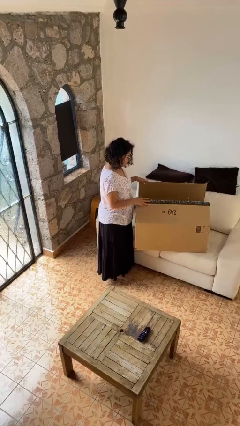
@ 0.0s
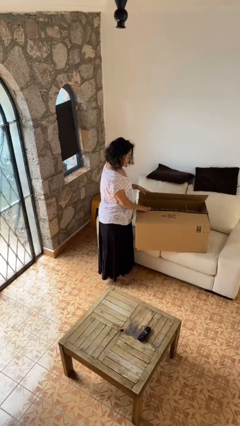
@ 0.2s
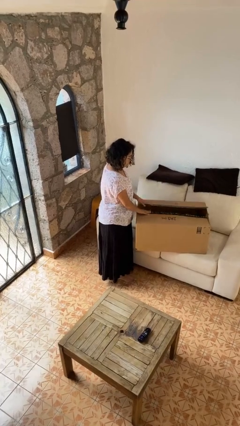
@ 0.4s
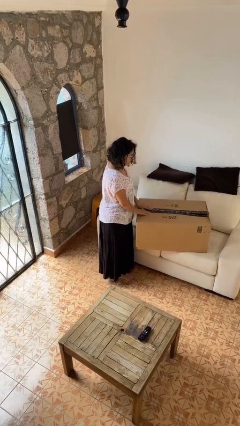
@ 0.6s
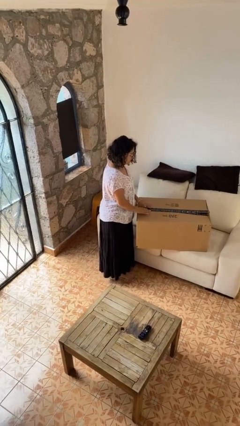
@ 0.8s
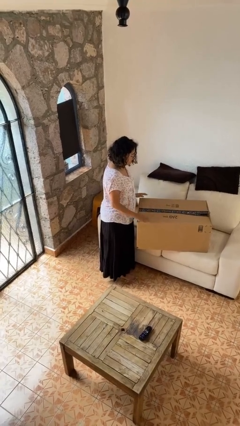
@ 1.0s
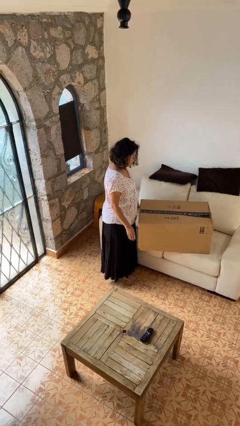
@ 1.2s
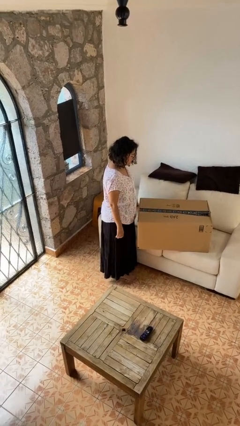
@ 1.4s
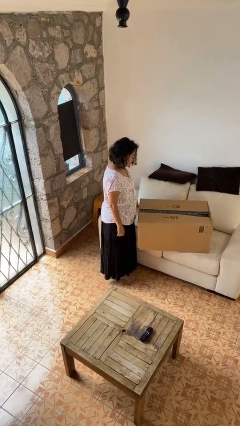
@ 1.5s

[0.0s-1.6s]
person closes box

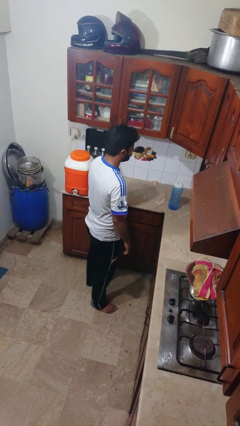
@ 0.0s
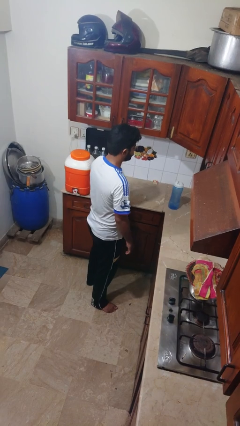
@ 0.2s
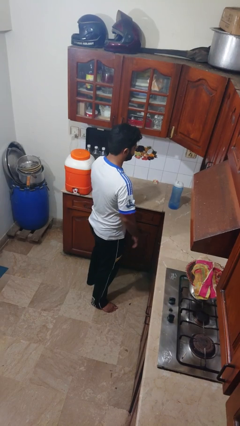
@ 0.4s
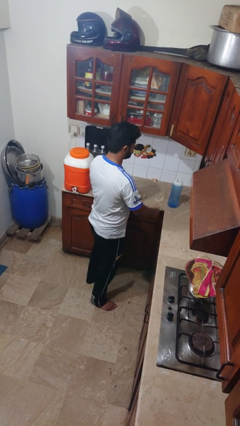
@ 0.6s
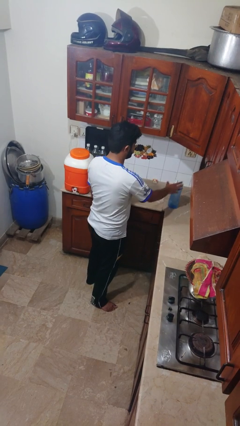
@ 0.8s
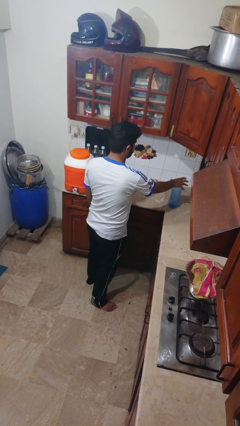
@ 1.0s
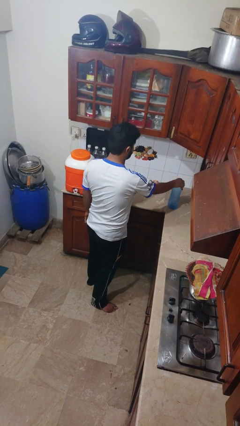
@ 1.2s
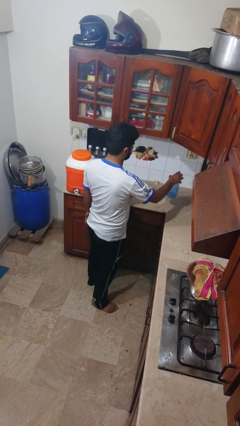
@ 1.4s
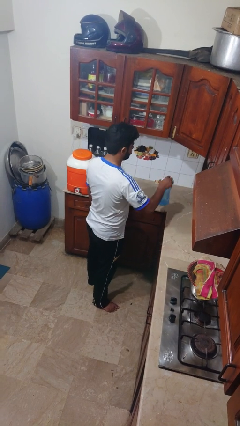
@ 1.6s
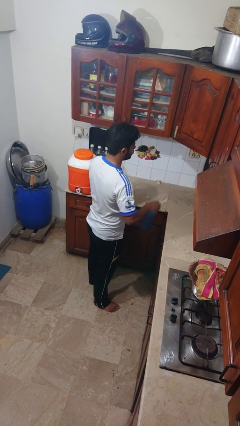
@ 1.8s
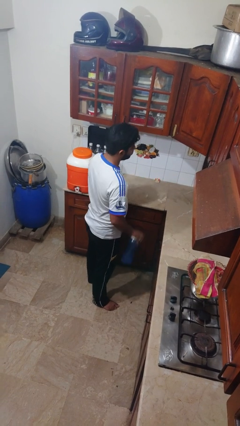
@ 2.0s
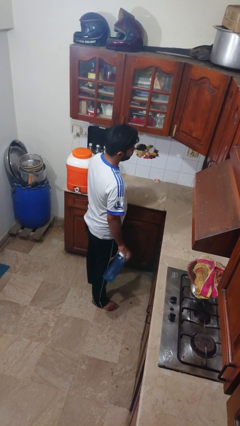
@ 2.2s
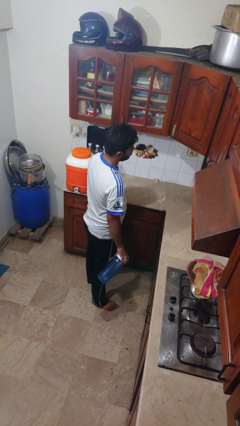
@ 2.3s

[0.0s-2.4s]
person picks up object from countertop

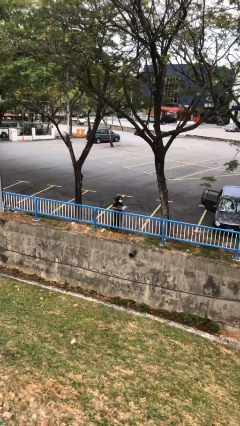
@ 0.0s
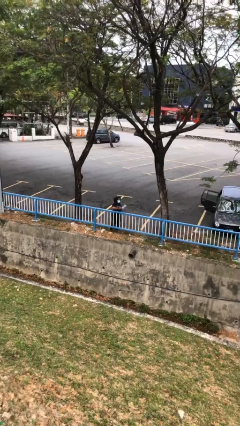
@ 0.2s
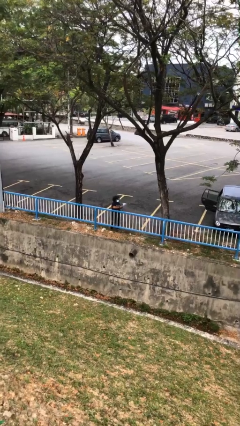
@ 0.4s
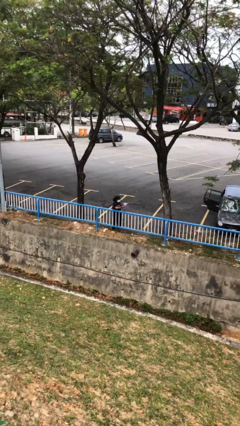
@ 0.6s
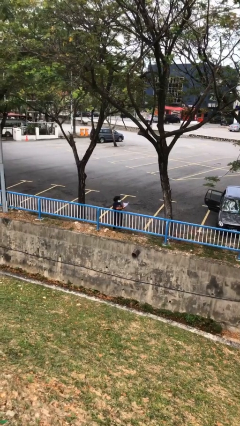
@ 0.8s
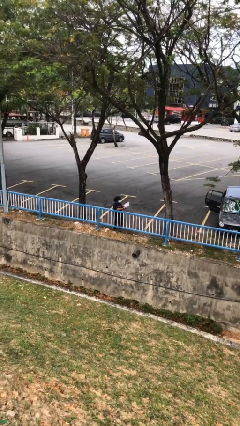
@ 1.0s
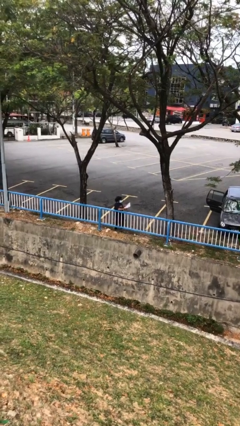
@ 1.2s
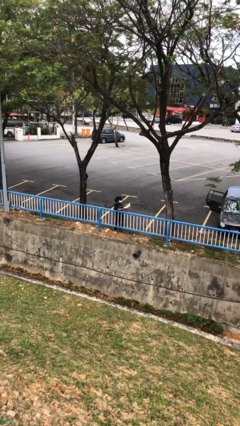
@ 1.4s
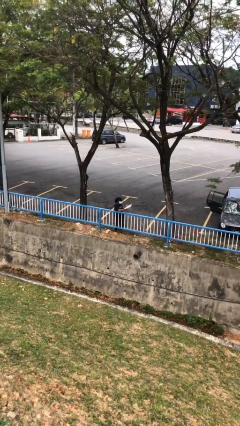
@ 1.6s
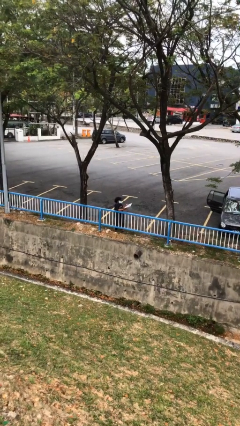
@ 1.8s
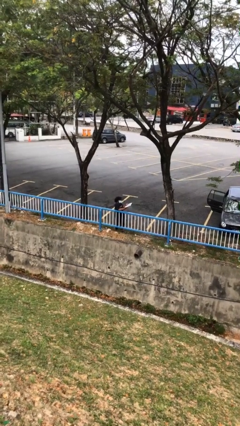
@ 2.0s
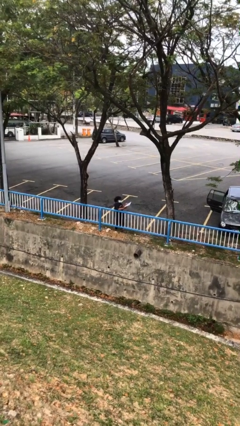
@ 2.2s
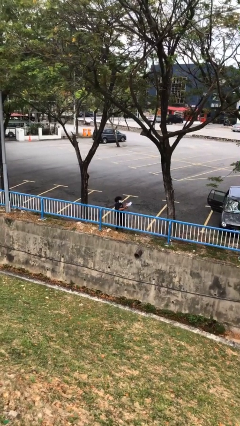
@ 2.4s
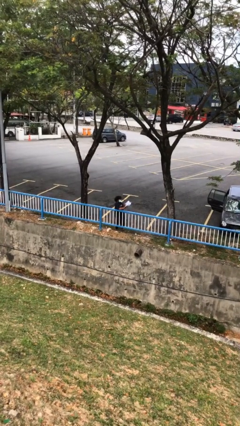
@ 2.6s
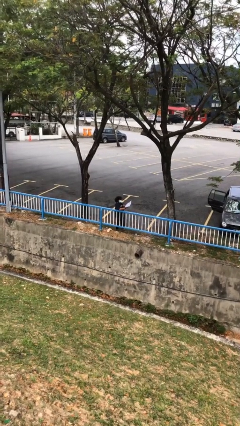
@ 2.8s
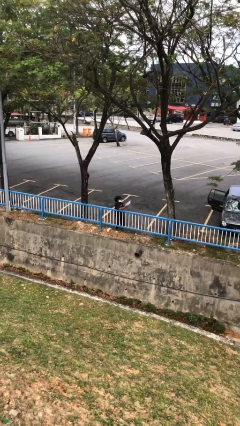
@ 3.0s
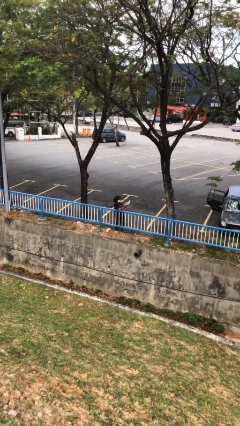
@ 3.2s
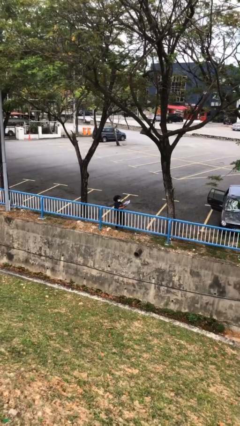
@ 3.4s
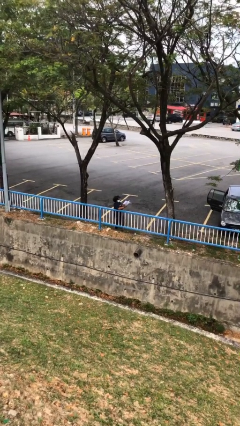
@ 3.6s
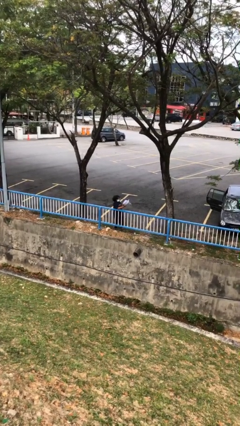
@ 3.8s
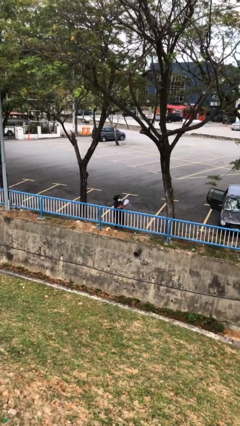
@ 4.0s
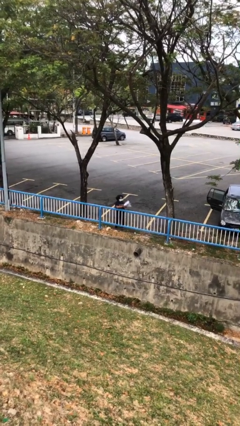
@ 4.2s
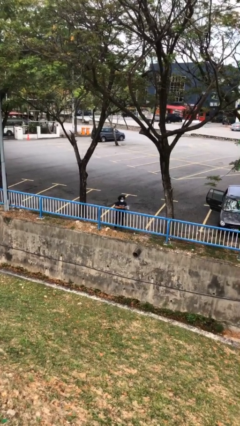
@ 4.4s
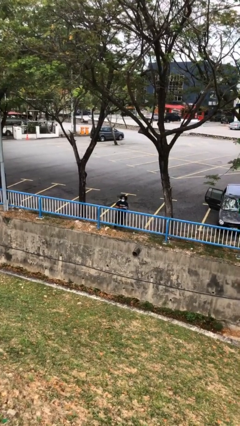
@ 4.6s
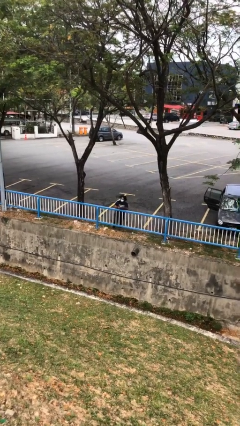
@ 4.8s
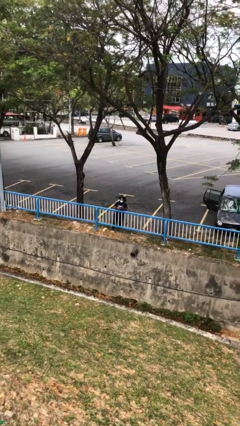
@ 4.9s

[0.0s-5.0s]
person reads document

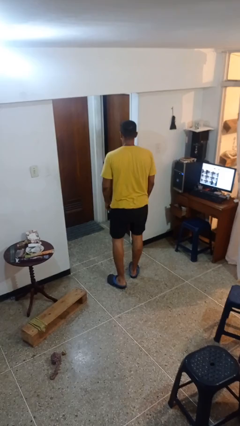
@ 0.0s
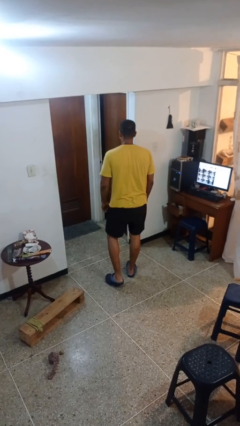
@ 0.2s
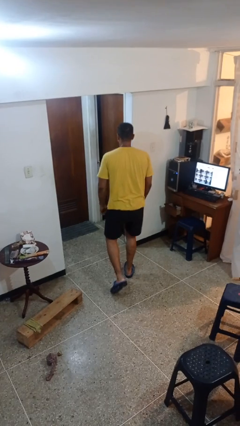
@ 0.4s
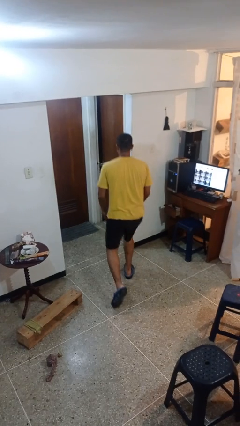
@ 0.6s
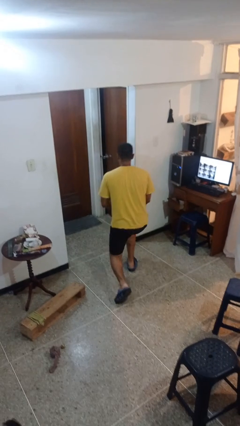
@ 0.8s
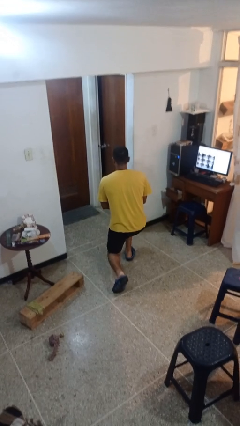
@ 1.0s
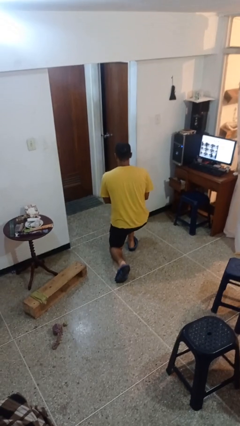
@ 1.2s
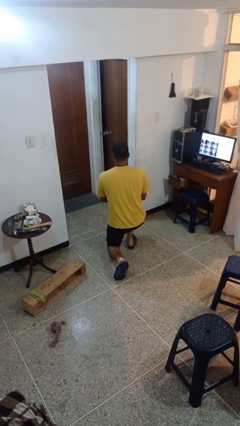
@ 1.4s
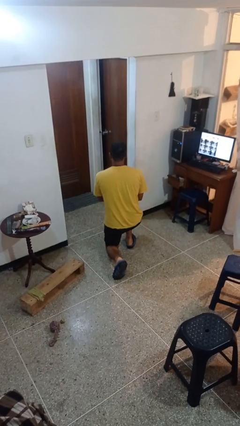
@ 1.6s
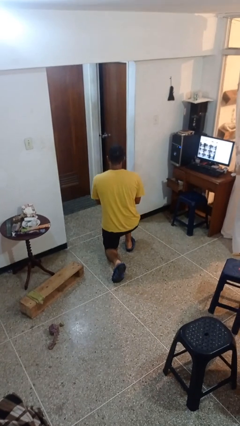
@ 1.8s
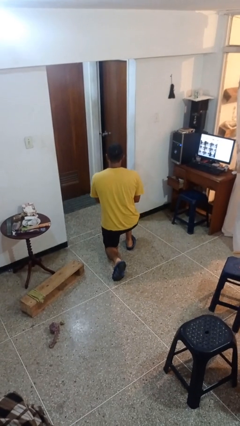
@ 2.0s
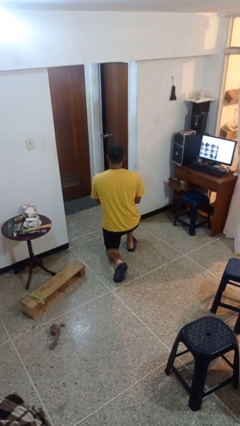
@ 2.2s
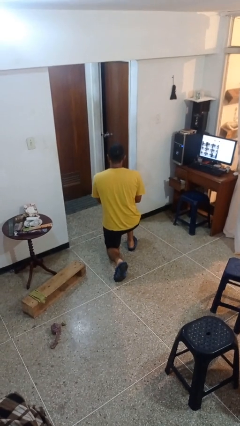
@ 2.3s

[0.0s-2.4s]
person kneels

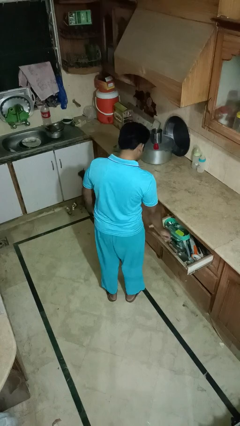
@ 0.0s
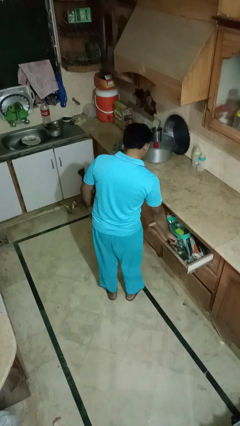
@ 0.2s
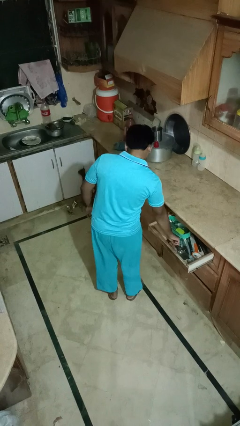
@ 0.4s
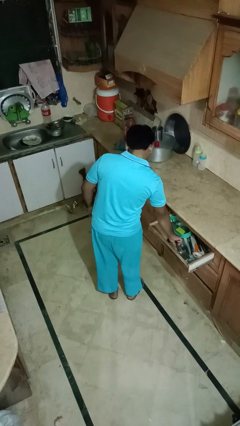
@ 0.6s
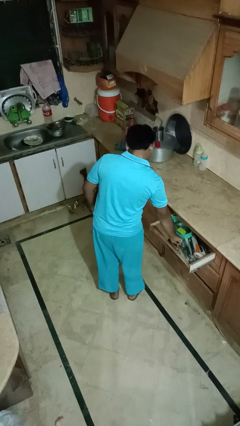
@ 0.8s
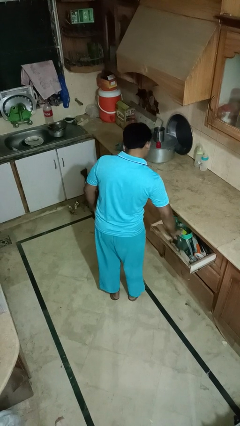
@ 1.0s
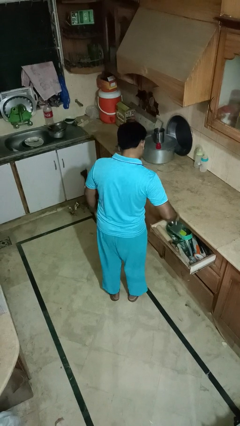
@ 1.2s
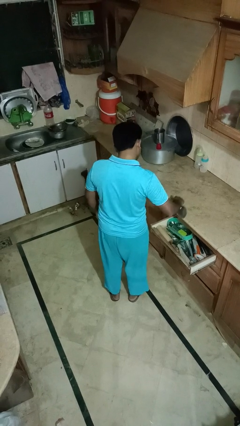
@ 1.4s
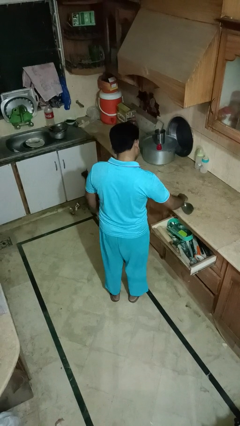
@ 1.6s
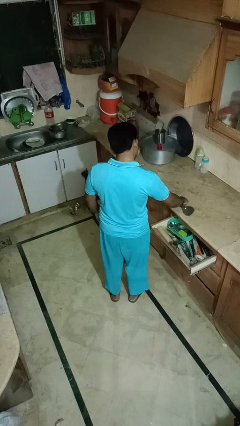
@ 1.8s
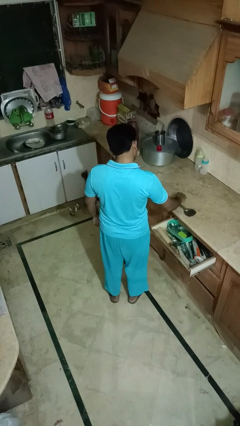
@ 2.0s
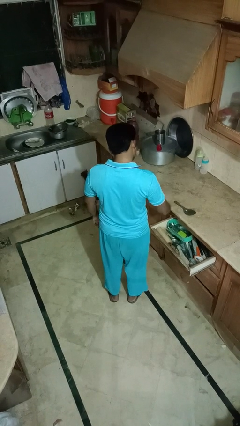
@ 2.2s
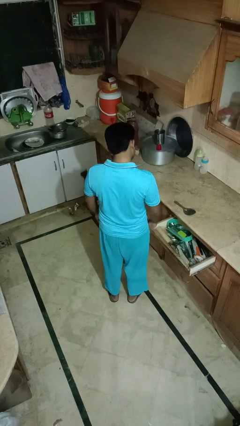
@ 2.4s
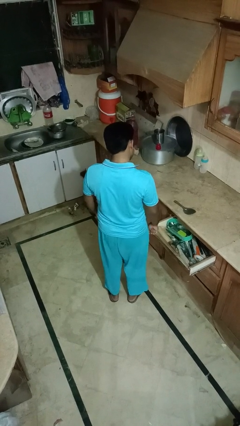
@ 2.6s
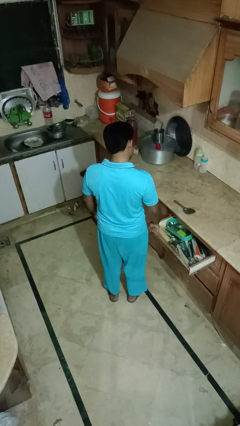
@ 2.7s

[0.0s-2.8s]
person takes object from kitchen drawer

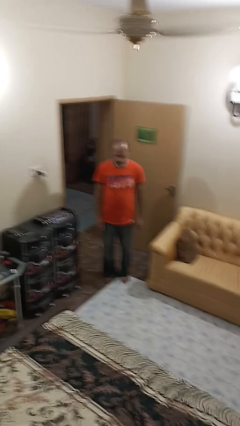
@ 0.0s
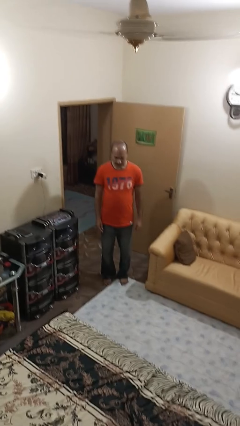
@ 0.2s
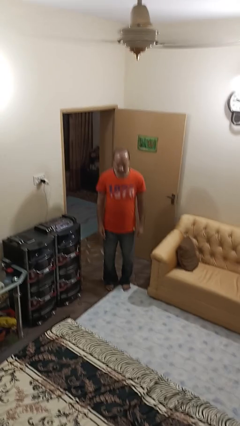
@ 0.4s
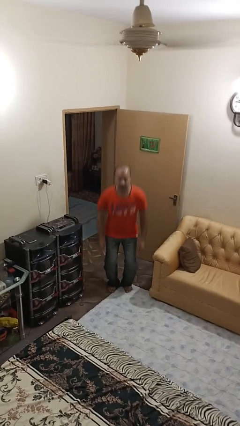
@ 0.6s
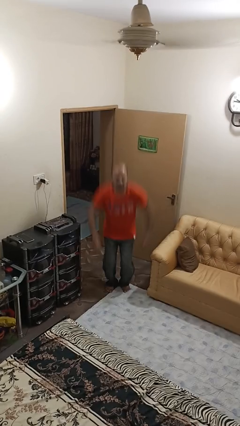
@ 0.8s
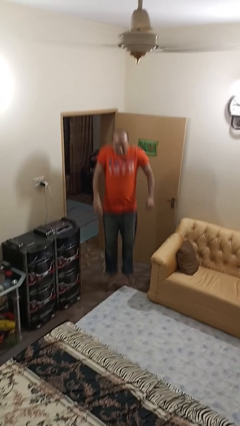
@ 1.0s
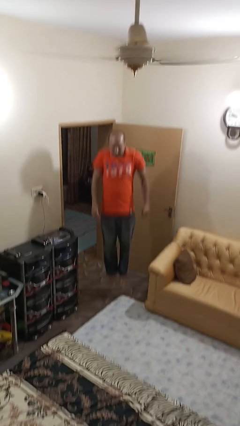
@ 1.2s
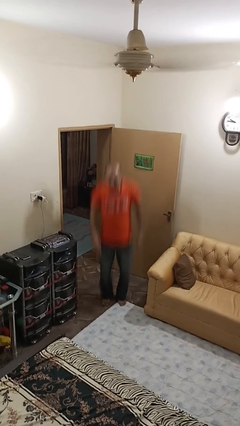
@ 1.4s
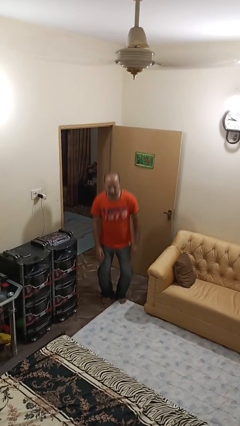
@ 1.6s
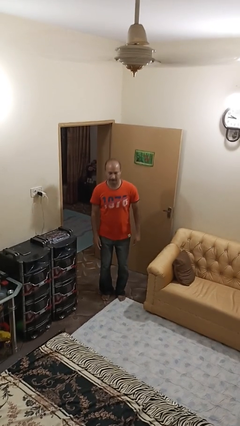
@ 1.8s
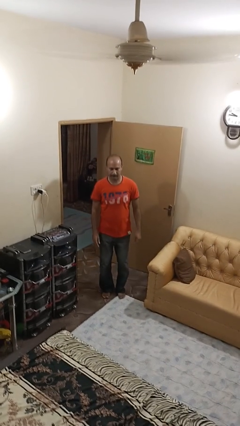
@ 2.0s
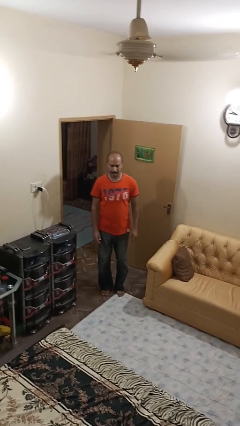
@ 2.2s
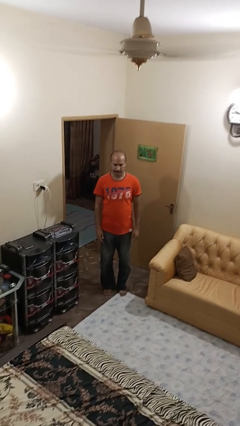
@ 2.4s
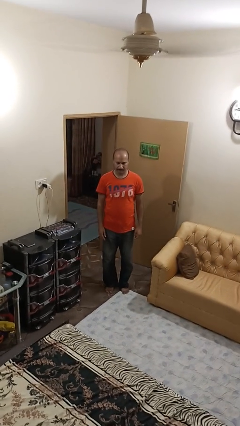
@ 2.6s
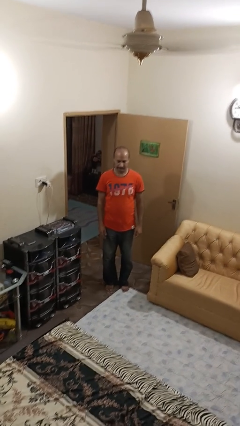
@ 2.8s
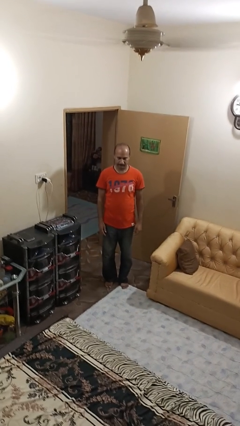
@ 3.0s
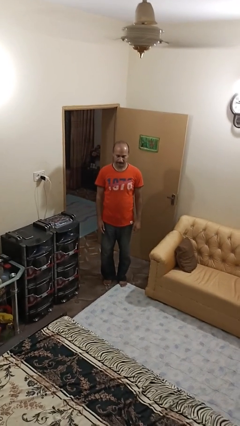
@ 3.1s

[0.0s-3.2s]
person jumps

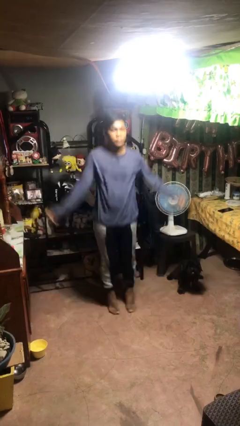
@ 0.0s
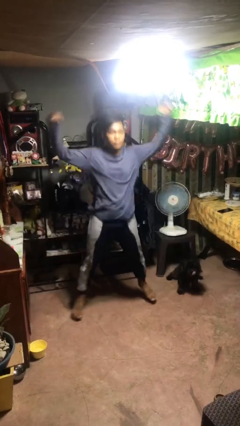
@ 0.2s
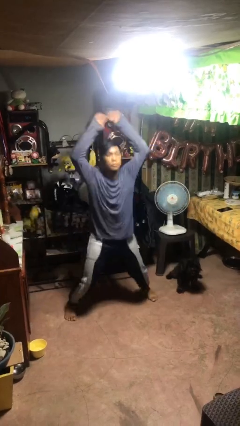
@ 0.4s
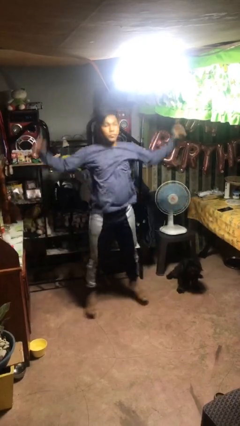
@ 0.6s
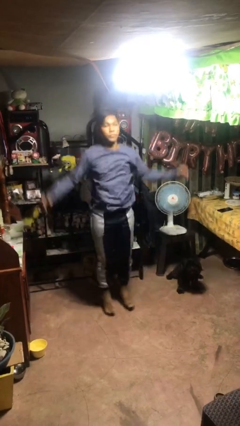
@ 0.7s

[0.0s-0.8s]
person exercises with jumping jacks
